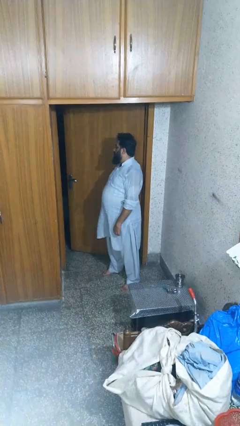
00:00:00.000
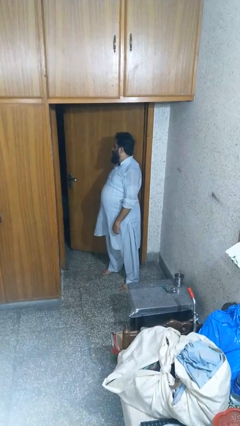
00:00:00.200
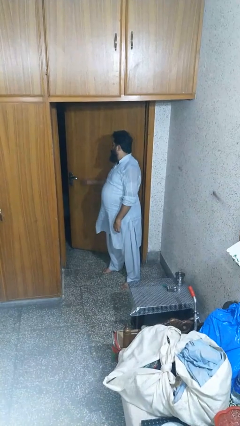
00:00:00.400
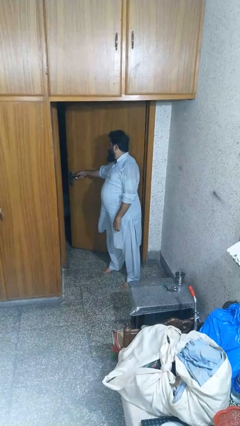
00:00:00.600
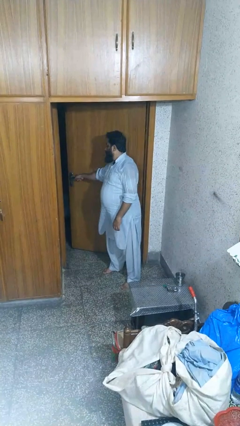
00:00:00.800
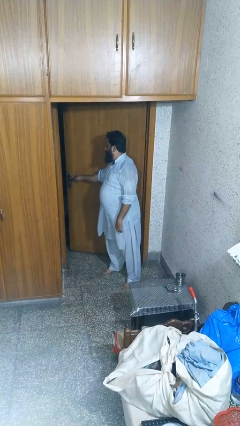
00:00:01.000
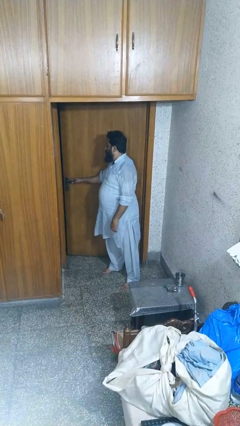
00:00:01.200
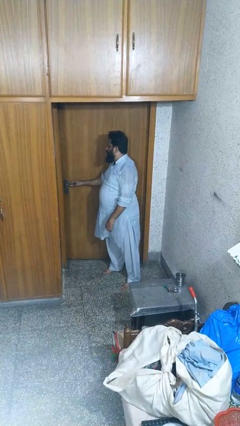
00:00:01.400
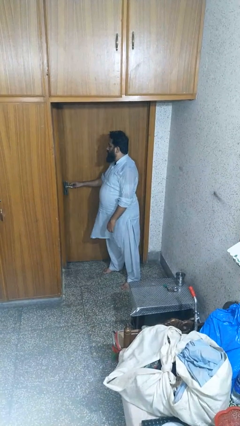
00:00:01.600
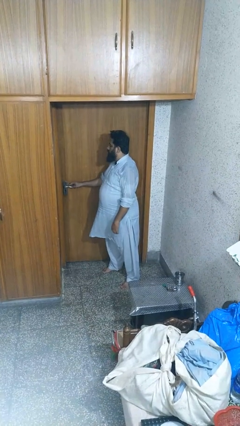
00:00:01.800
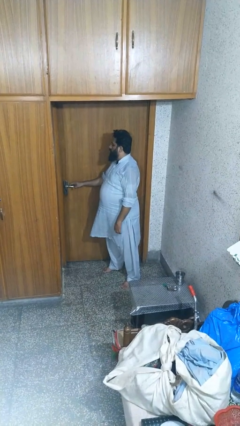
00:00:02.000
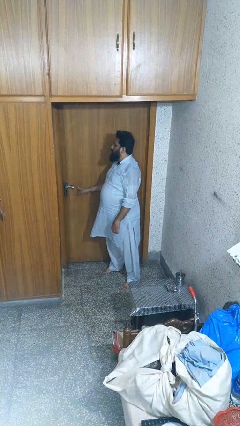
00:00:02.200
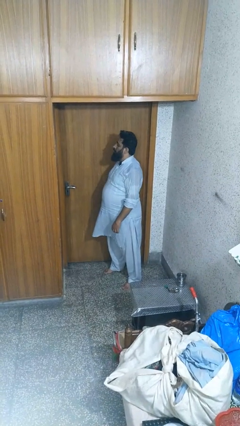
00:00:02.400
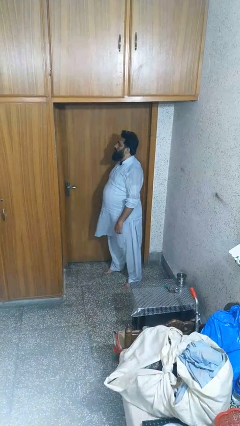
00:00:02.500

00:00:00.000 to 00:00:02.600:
person closes door with hip

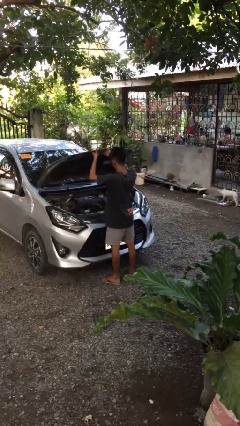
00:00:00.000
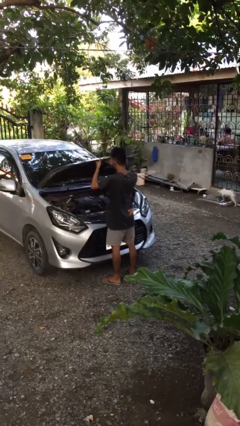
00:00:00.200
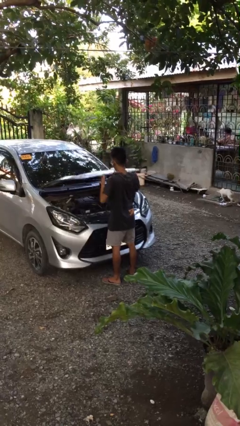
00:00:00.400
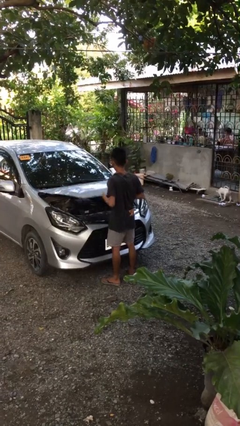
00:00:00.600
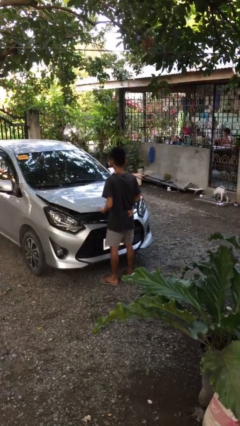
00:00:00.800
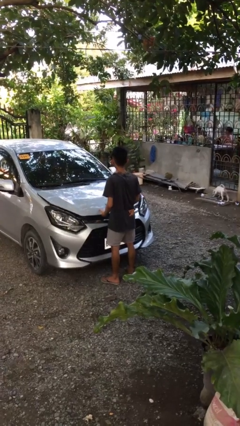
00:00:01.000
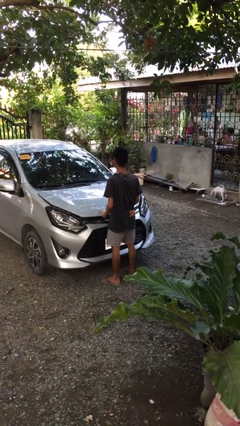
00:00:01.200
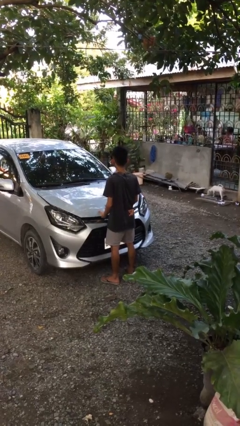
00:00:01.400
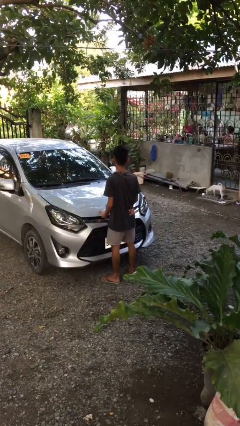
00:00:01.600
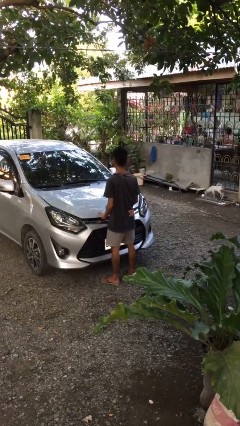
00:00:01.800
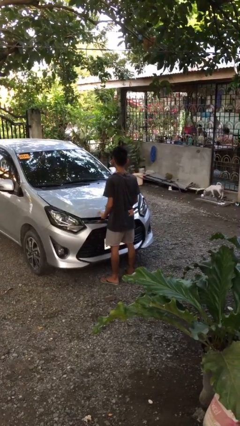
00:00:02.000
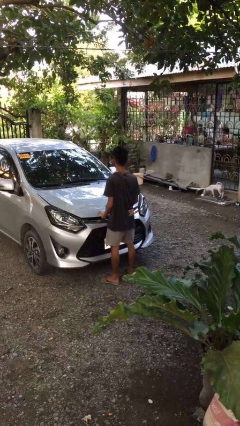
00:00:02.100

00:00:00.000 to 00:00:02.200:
person closes car hood

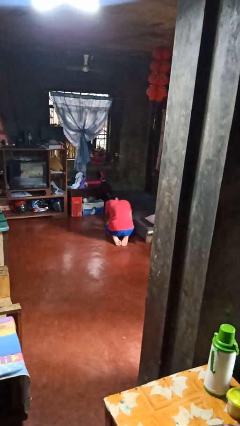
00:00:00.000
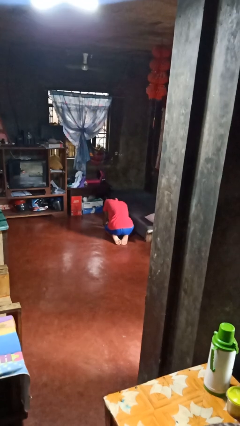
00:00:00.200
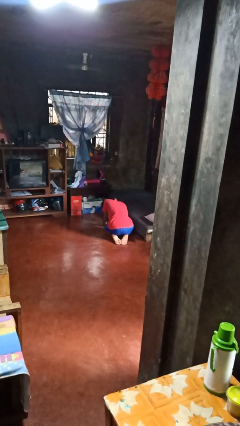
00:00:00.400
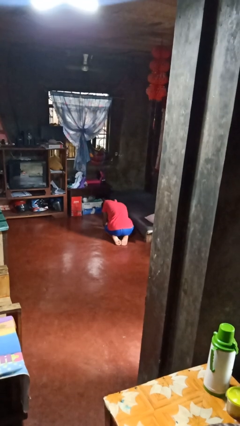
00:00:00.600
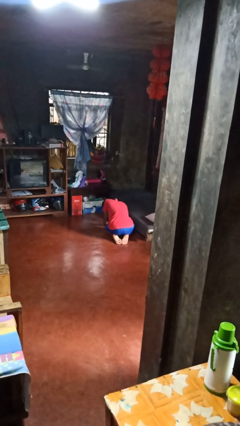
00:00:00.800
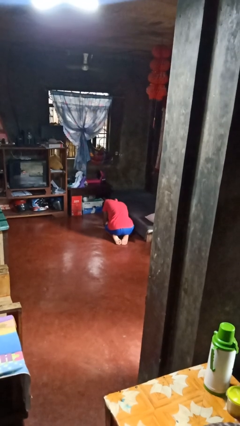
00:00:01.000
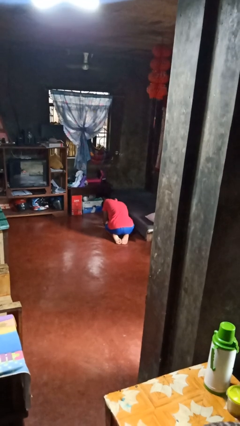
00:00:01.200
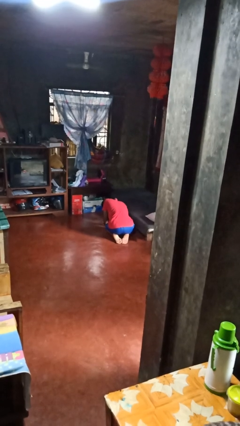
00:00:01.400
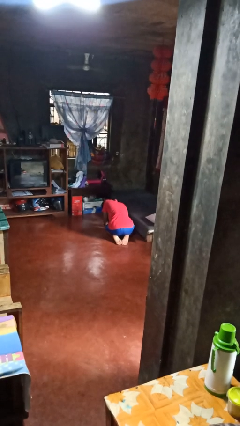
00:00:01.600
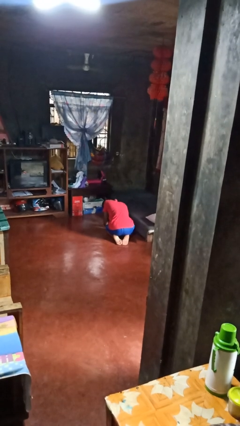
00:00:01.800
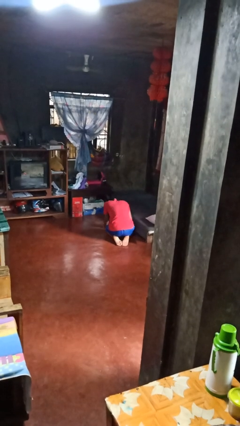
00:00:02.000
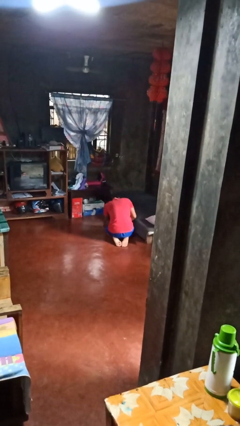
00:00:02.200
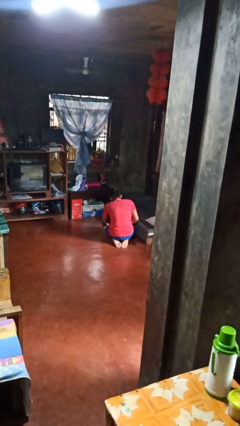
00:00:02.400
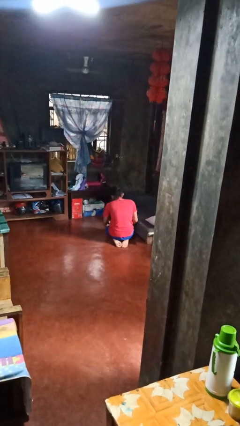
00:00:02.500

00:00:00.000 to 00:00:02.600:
person searches under bed

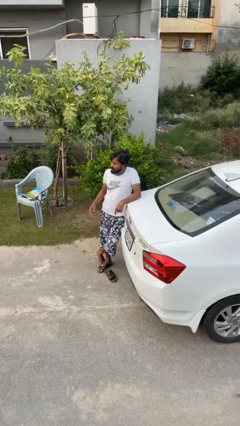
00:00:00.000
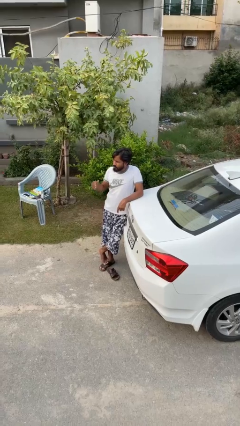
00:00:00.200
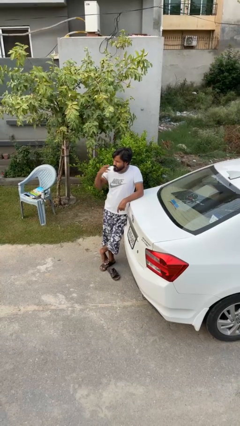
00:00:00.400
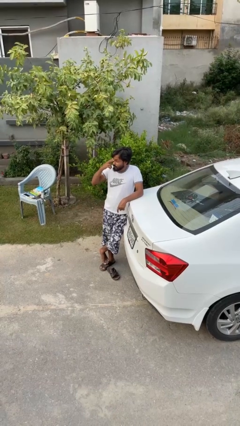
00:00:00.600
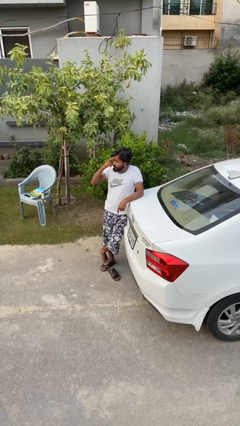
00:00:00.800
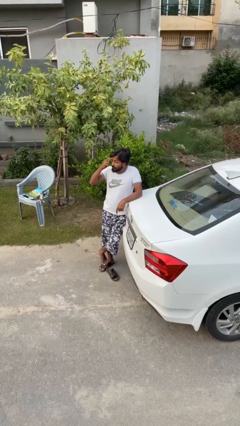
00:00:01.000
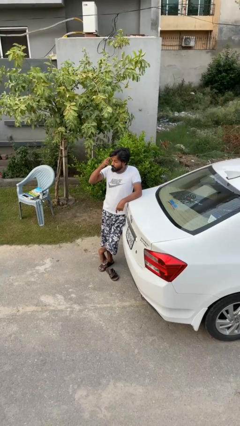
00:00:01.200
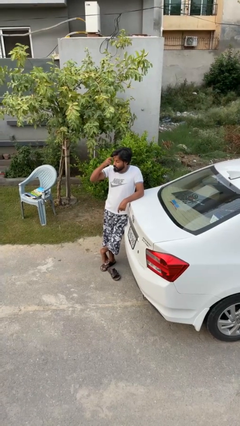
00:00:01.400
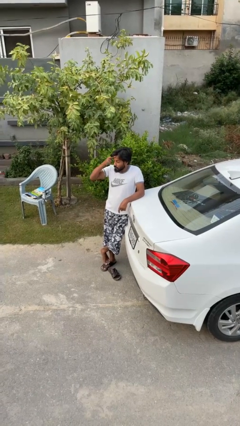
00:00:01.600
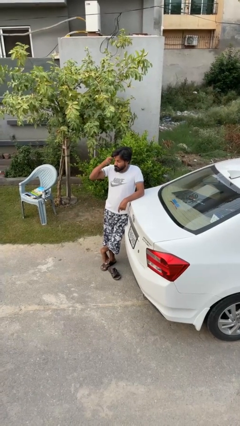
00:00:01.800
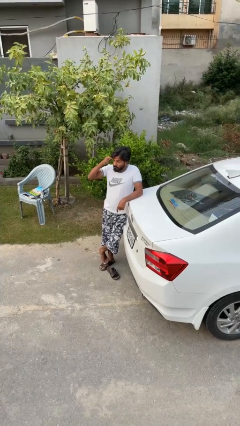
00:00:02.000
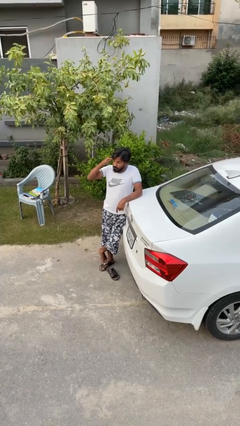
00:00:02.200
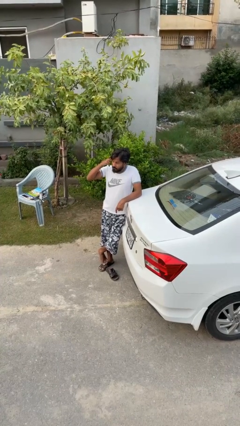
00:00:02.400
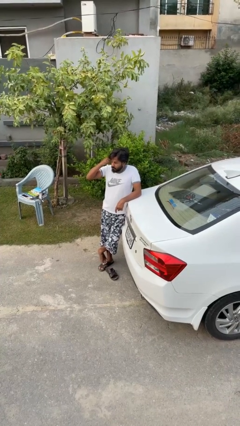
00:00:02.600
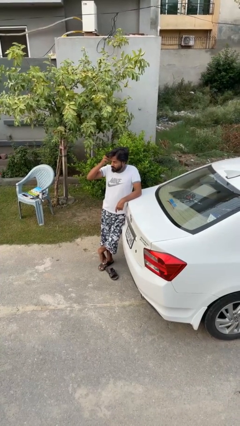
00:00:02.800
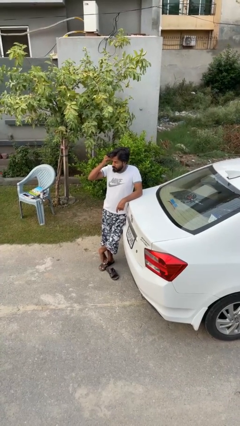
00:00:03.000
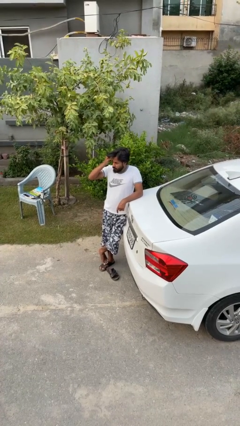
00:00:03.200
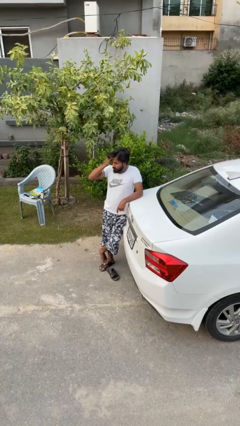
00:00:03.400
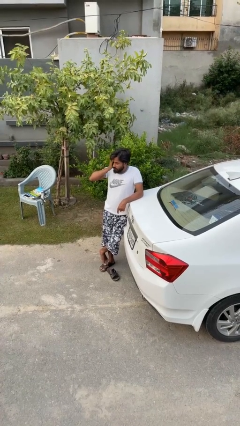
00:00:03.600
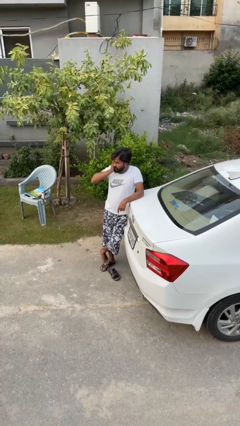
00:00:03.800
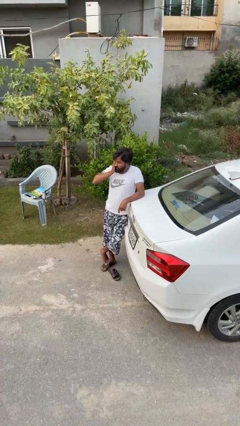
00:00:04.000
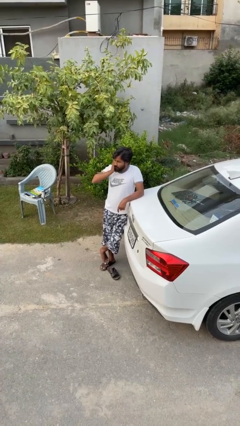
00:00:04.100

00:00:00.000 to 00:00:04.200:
person scratches face

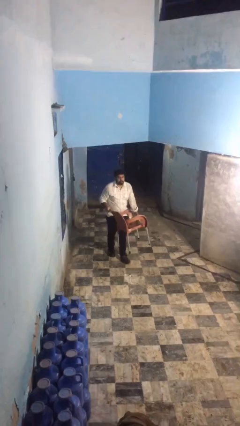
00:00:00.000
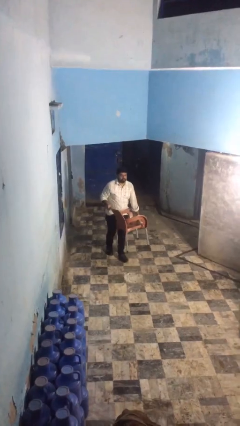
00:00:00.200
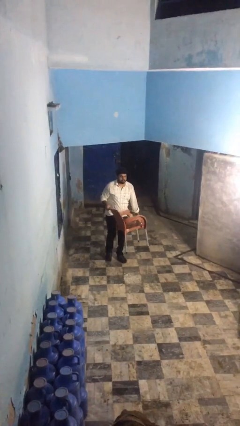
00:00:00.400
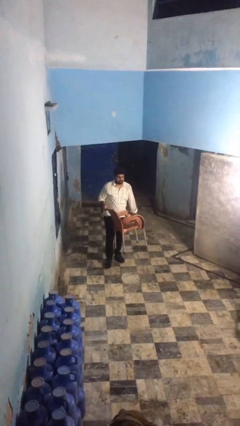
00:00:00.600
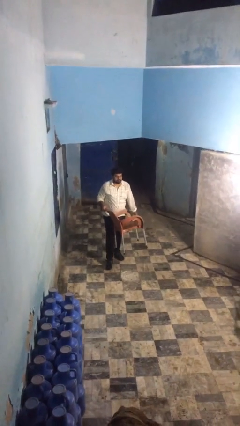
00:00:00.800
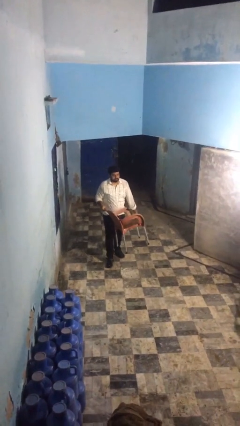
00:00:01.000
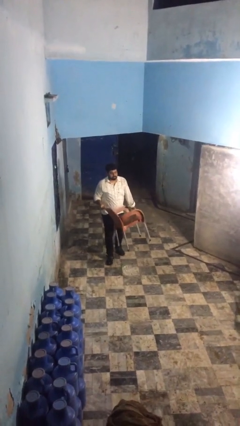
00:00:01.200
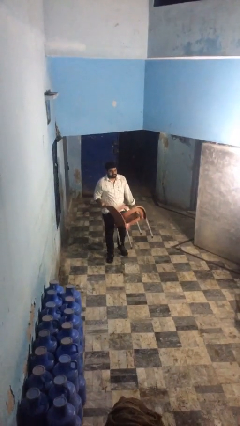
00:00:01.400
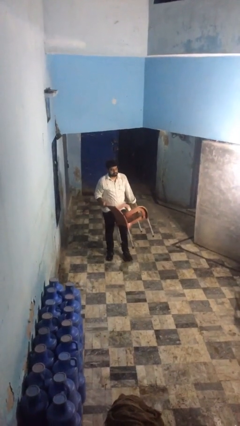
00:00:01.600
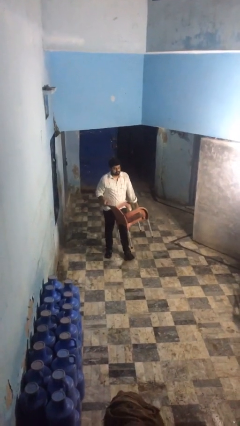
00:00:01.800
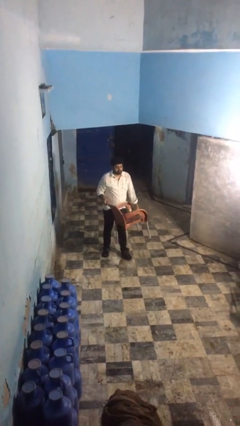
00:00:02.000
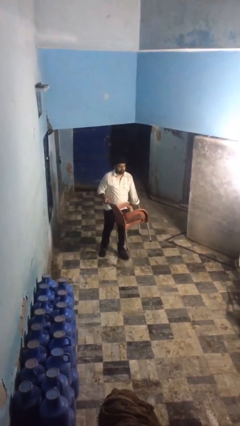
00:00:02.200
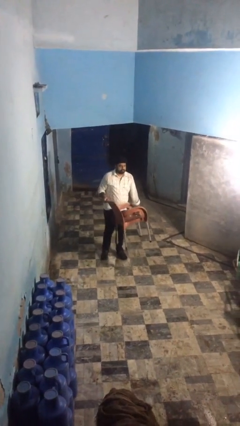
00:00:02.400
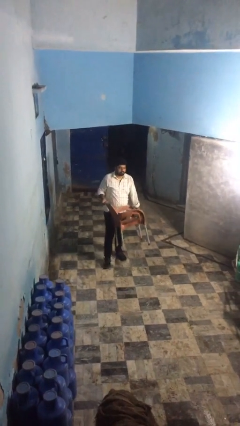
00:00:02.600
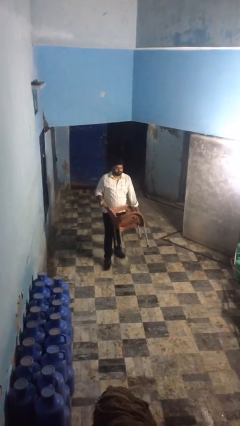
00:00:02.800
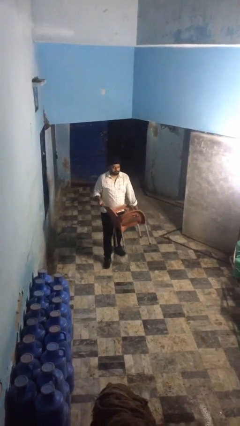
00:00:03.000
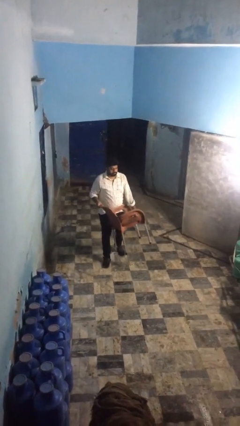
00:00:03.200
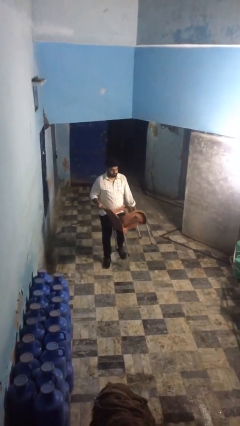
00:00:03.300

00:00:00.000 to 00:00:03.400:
person carries heavy object

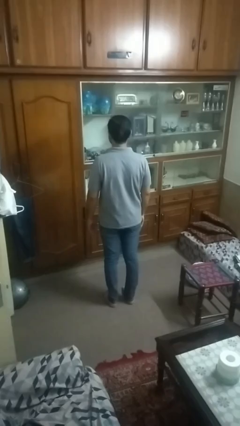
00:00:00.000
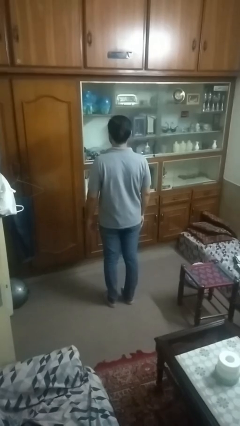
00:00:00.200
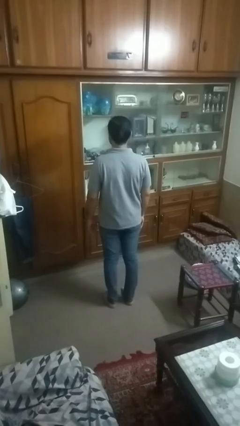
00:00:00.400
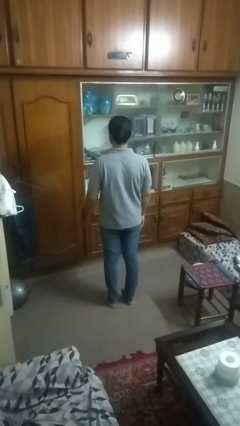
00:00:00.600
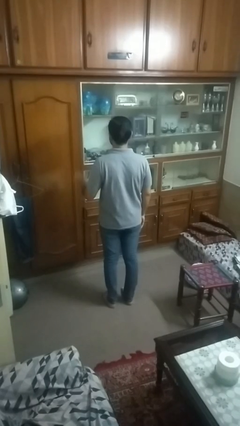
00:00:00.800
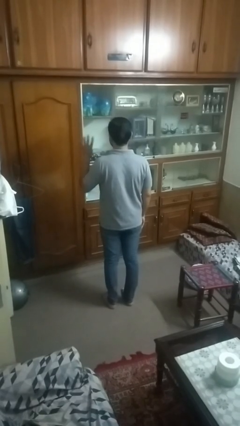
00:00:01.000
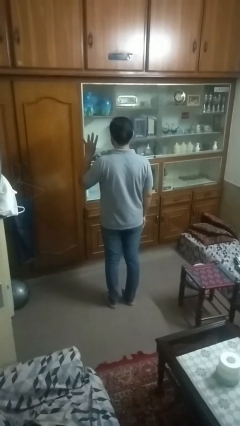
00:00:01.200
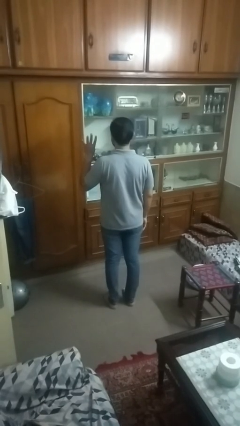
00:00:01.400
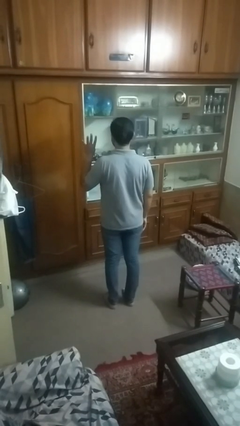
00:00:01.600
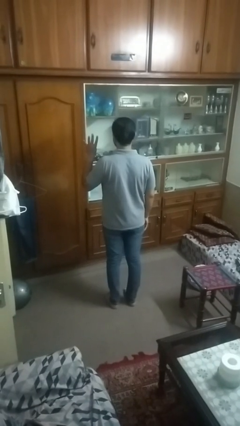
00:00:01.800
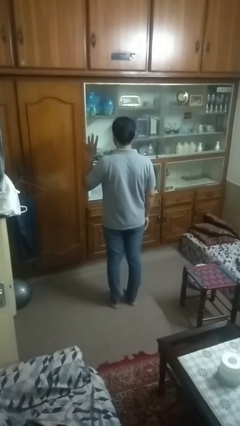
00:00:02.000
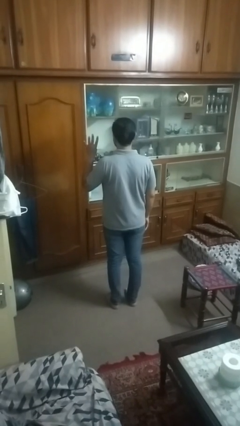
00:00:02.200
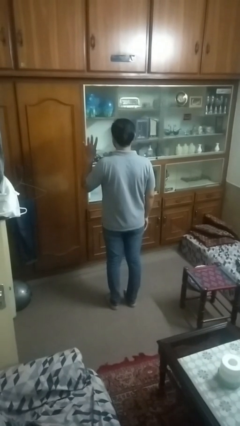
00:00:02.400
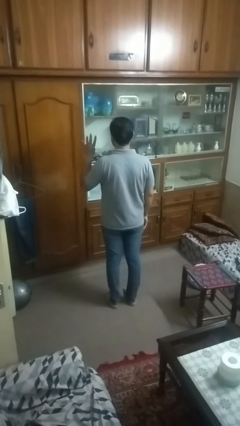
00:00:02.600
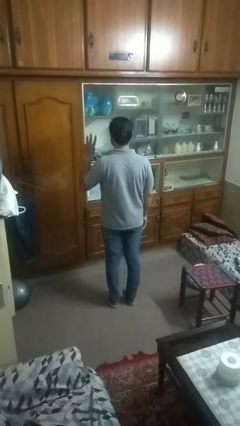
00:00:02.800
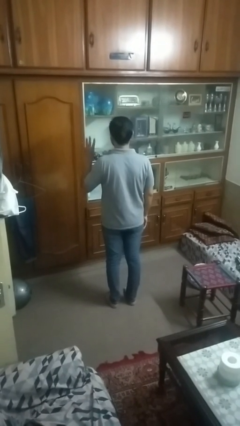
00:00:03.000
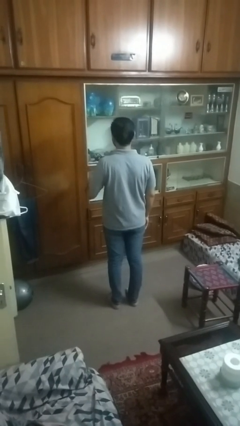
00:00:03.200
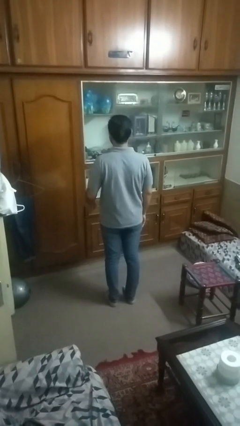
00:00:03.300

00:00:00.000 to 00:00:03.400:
person gestures number four
